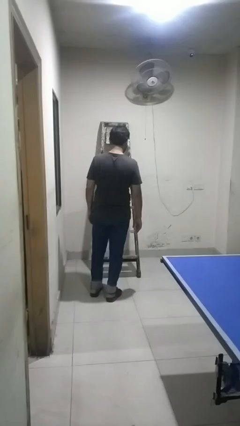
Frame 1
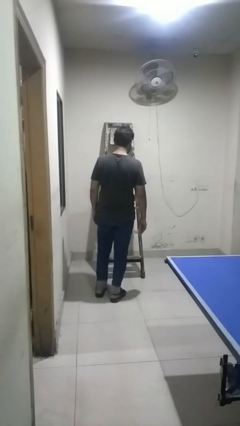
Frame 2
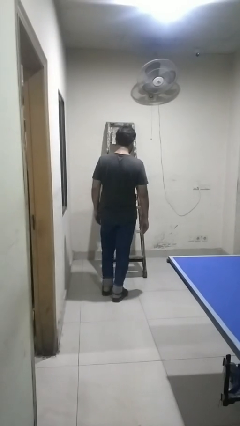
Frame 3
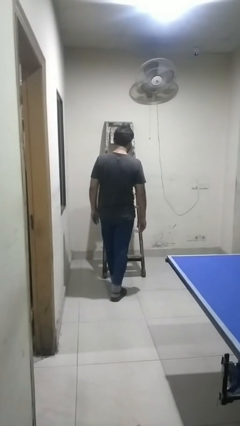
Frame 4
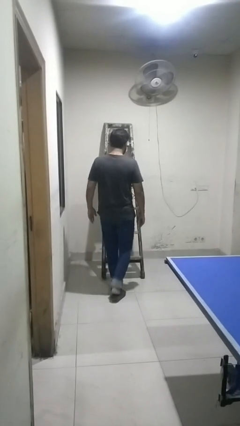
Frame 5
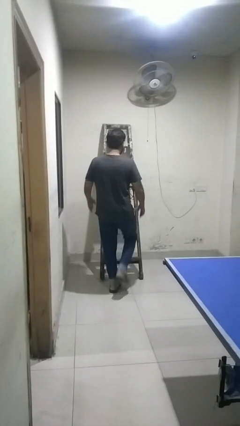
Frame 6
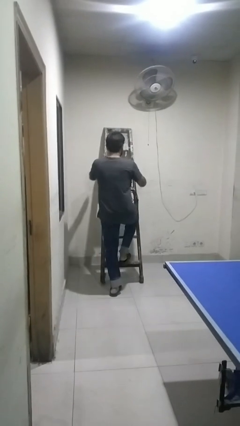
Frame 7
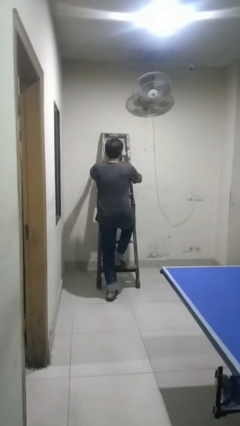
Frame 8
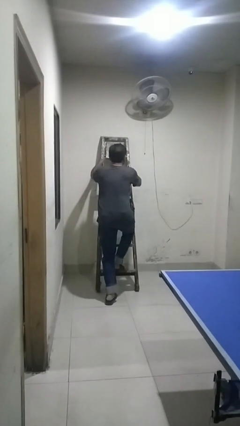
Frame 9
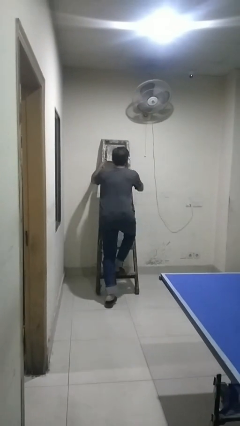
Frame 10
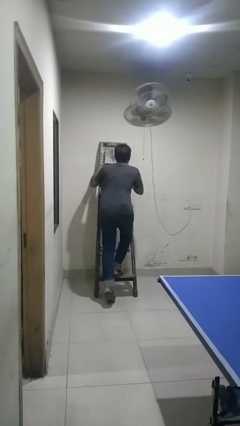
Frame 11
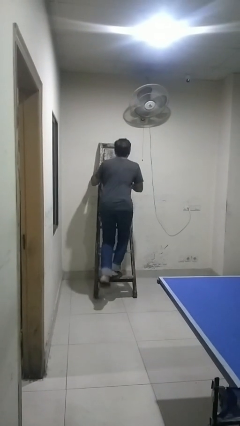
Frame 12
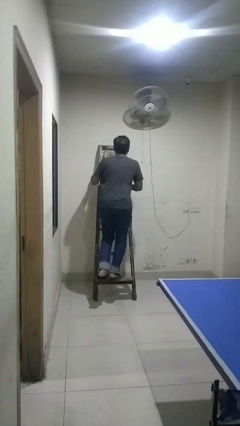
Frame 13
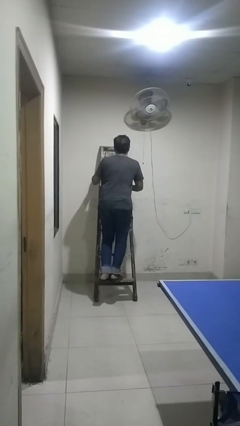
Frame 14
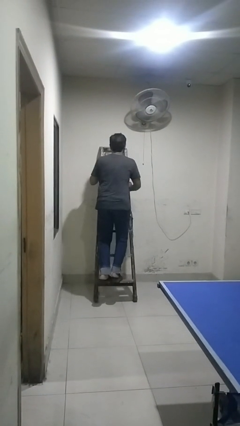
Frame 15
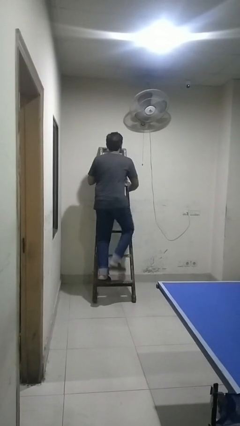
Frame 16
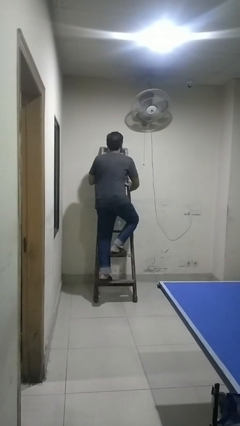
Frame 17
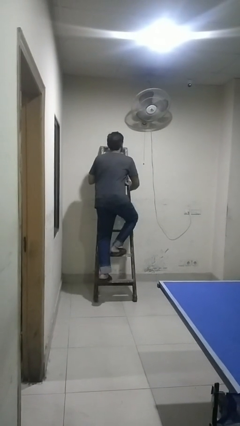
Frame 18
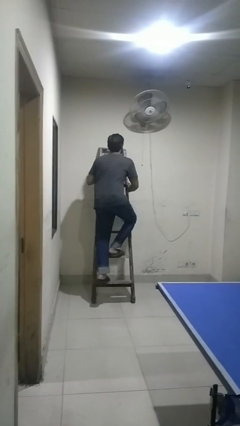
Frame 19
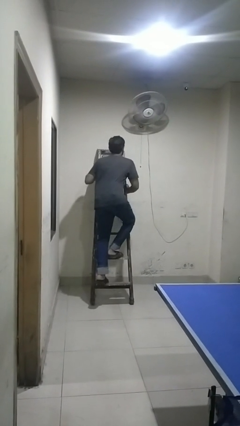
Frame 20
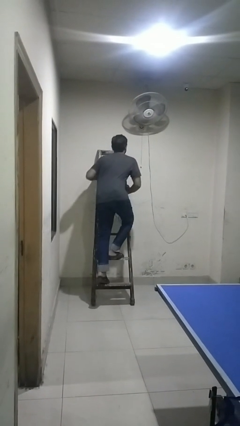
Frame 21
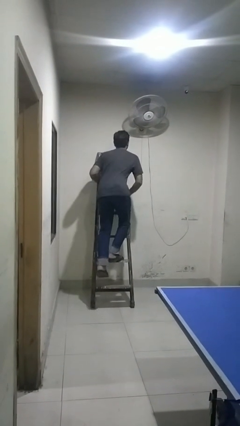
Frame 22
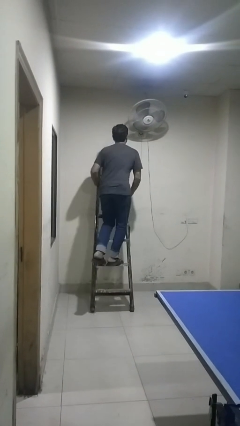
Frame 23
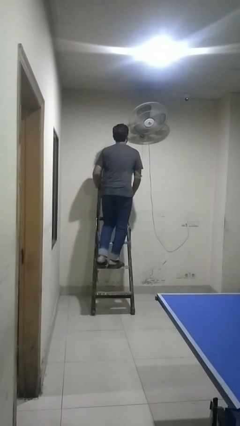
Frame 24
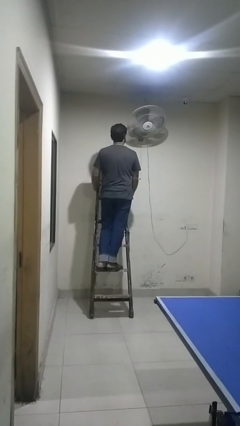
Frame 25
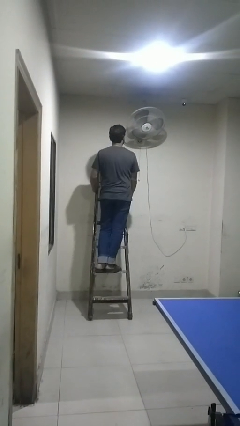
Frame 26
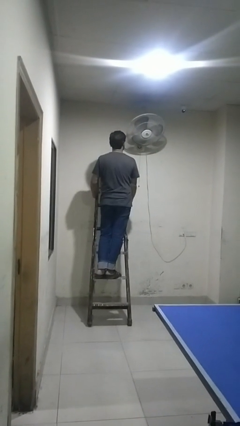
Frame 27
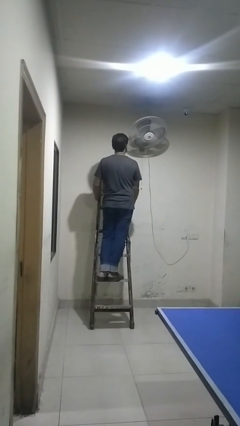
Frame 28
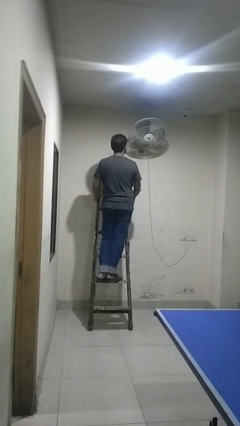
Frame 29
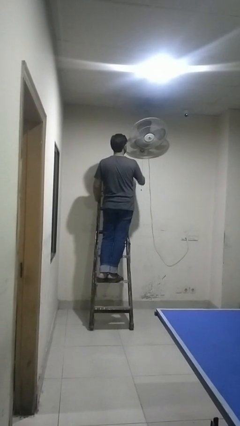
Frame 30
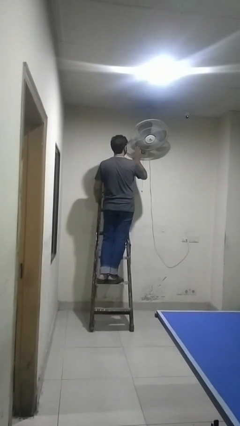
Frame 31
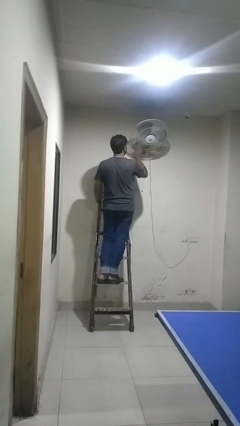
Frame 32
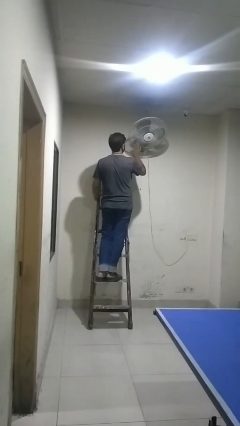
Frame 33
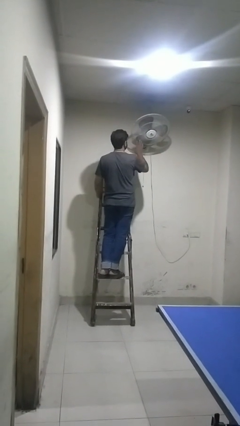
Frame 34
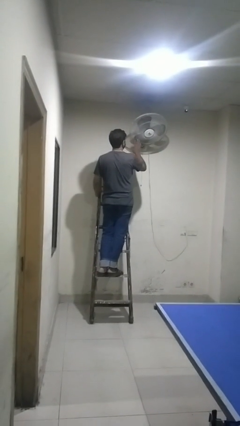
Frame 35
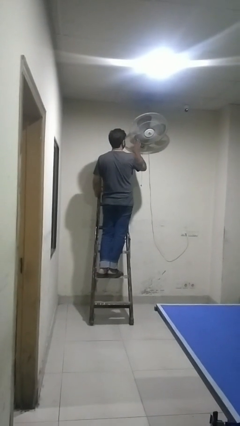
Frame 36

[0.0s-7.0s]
person climbs up ladder

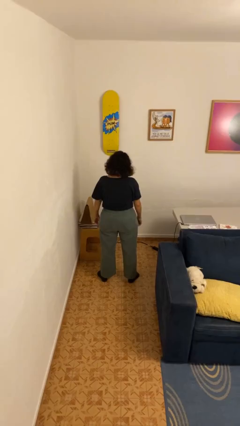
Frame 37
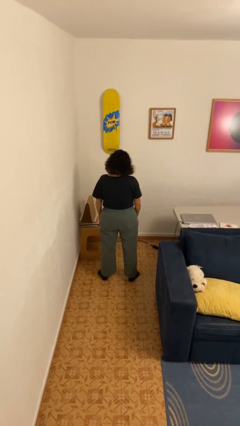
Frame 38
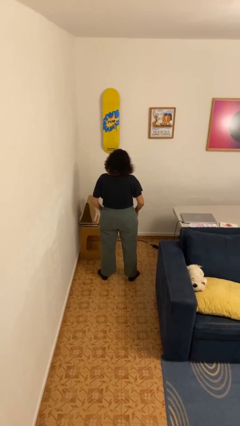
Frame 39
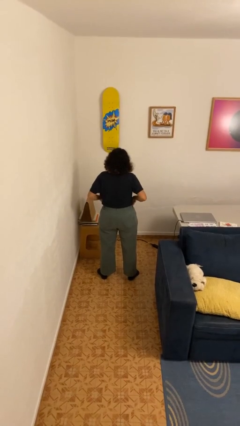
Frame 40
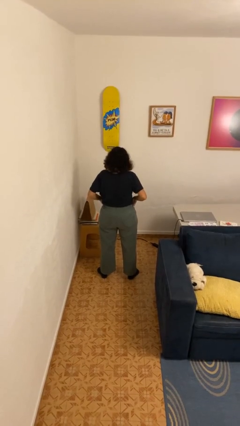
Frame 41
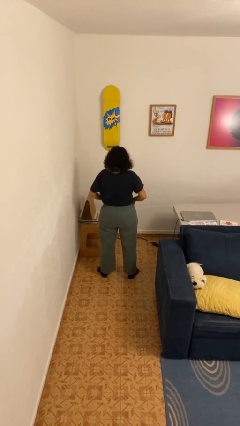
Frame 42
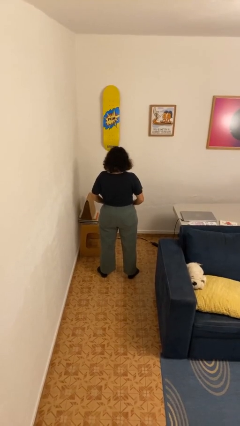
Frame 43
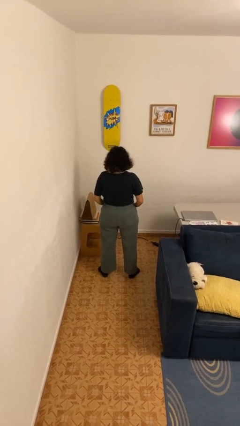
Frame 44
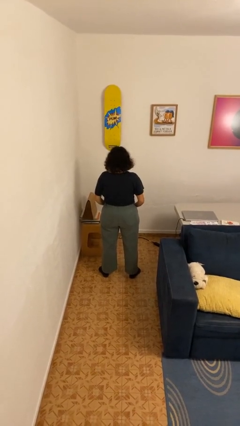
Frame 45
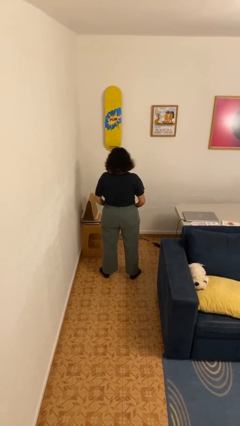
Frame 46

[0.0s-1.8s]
person puts hands in back pockets

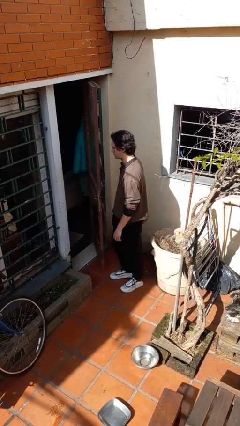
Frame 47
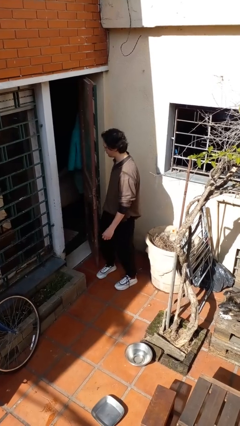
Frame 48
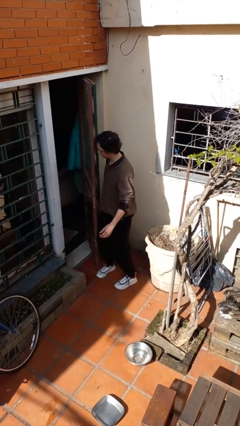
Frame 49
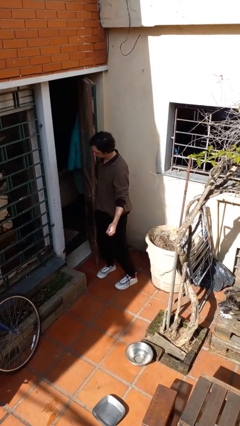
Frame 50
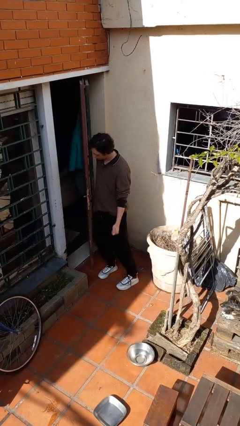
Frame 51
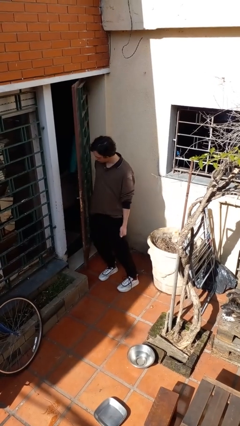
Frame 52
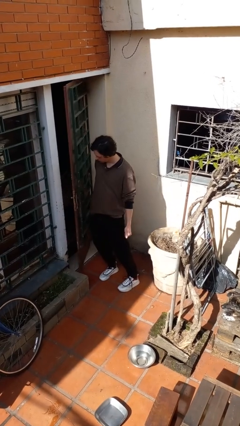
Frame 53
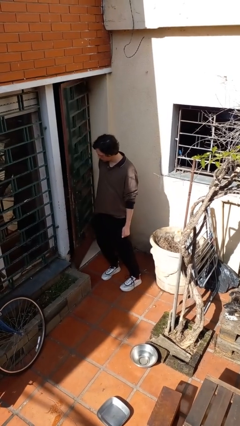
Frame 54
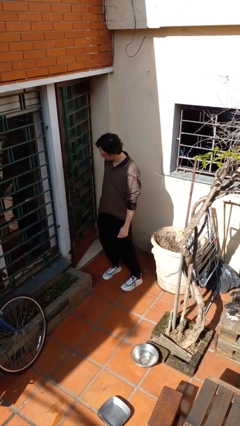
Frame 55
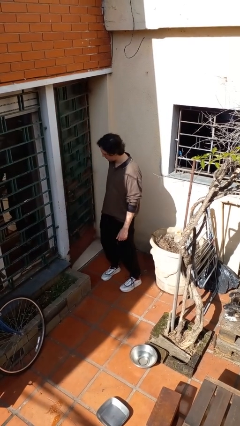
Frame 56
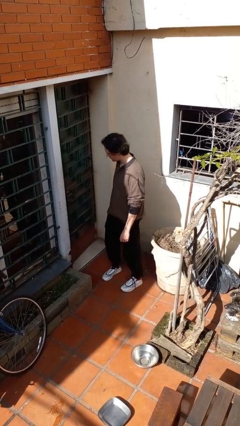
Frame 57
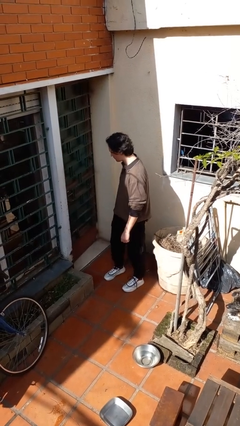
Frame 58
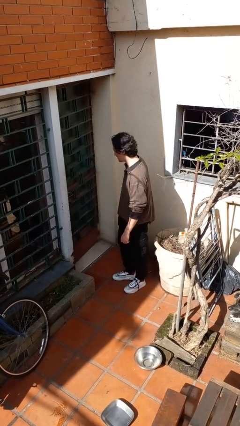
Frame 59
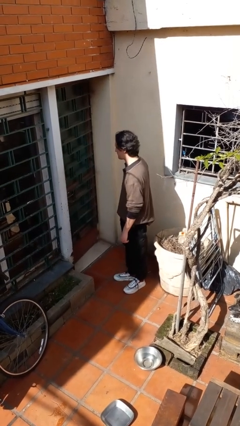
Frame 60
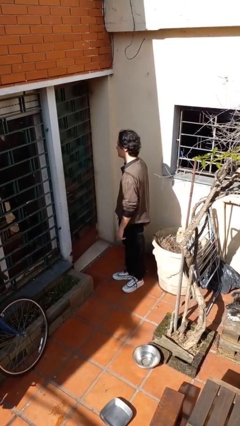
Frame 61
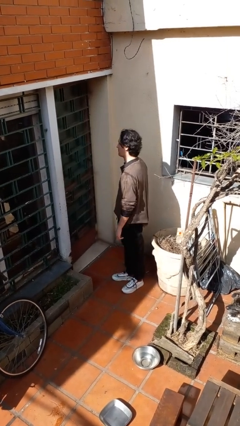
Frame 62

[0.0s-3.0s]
person closes door with hip

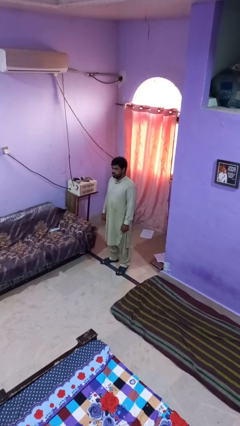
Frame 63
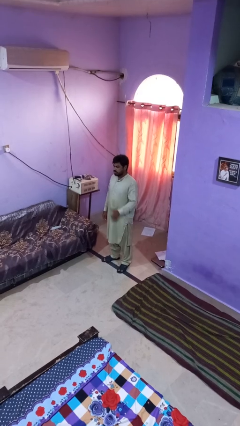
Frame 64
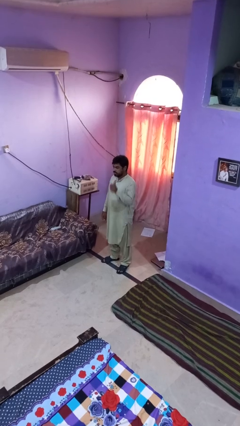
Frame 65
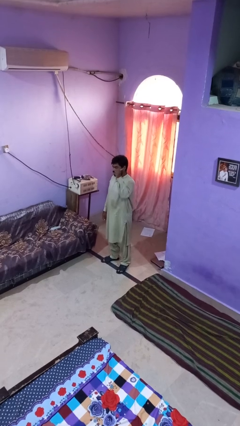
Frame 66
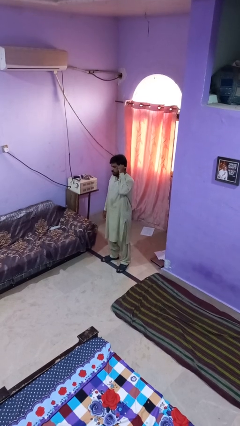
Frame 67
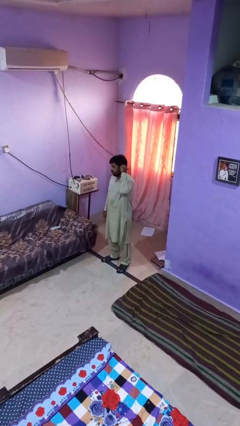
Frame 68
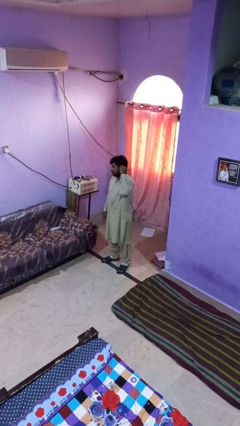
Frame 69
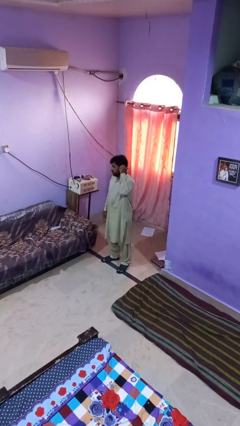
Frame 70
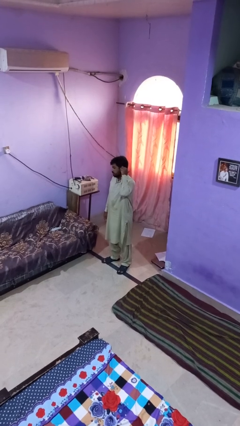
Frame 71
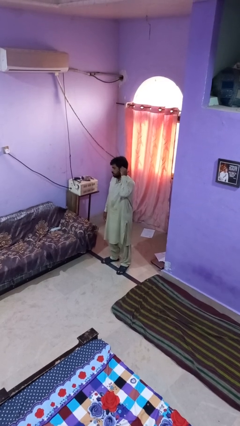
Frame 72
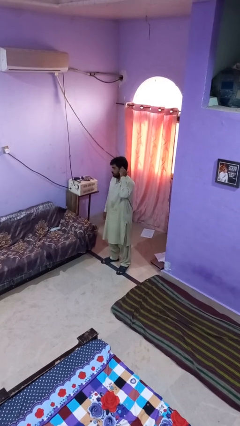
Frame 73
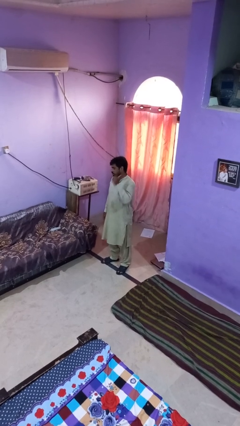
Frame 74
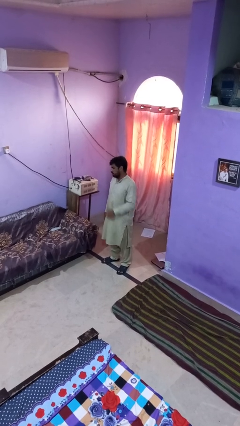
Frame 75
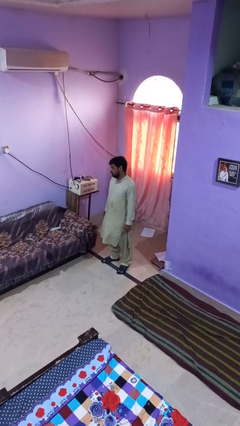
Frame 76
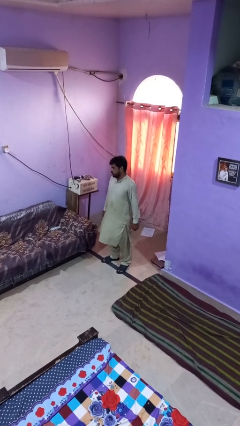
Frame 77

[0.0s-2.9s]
person gestures behind me

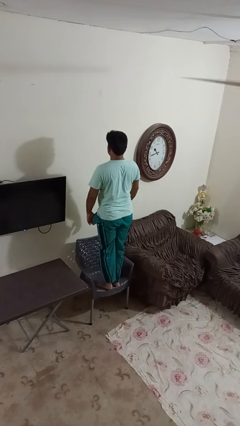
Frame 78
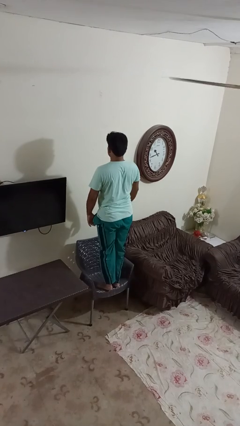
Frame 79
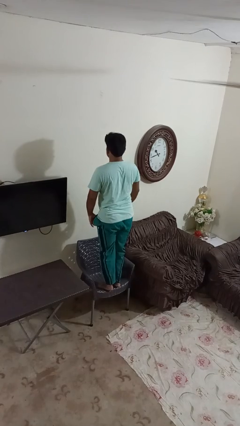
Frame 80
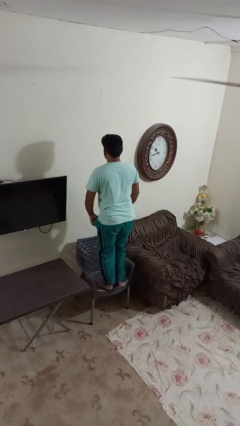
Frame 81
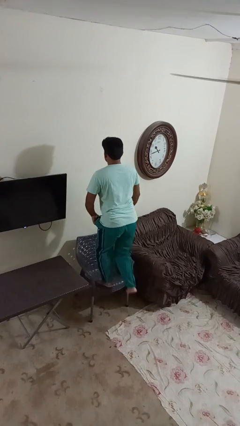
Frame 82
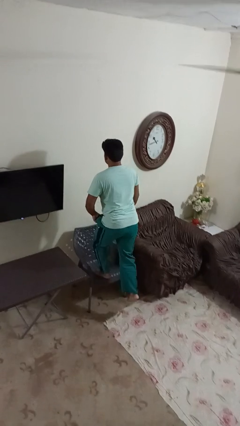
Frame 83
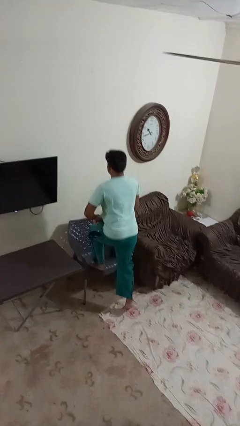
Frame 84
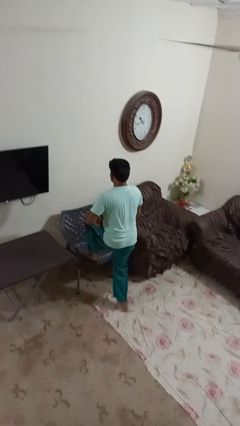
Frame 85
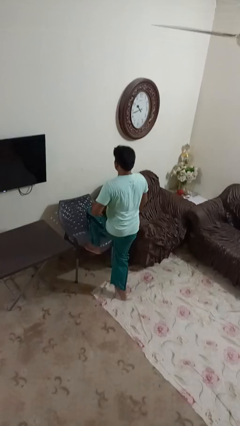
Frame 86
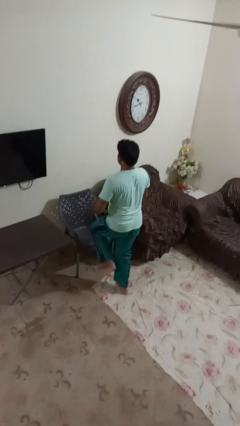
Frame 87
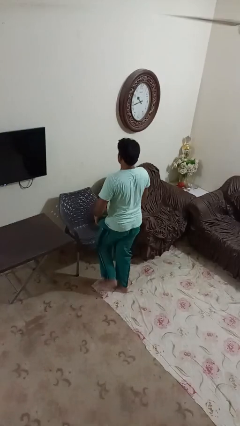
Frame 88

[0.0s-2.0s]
person climbs off chair

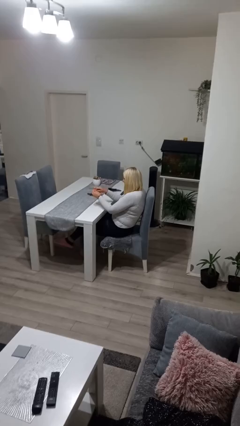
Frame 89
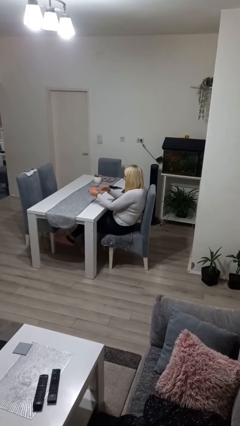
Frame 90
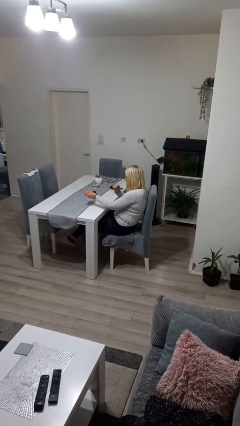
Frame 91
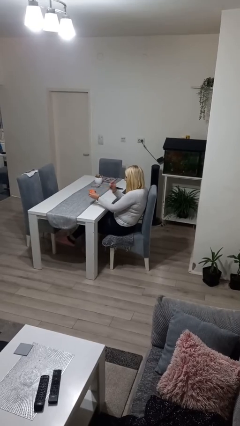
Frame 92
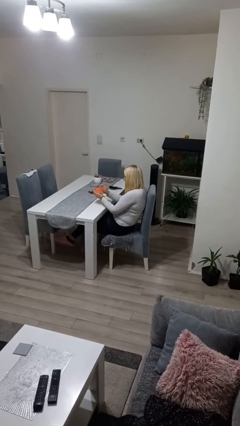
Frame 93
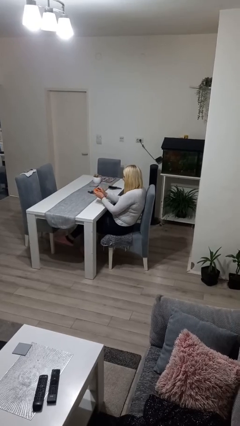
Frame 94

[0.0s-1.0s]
person tears paper
